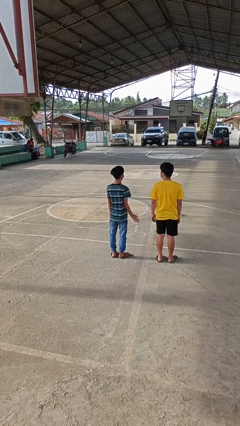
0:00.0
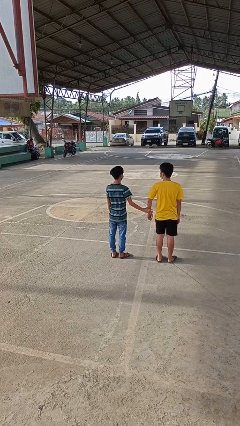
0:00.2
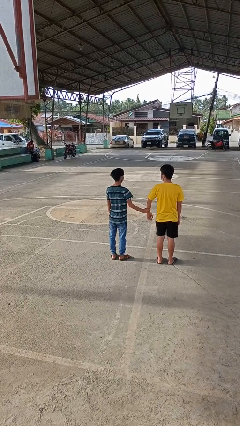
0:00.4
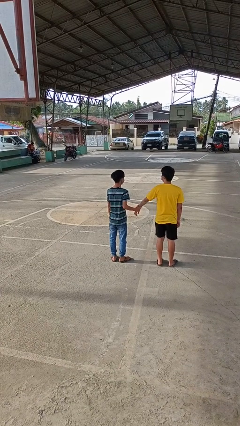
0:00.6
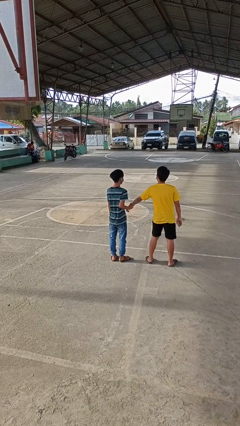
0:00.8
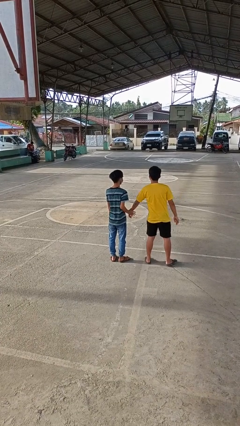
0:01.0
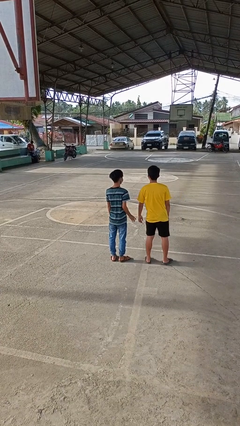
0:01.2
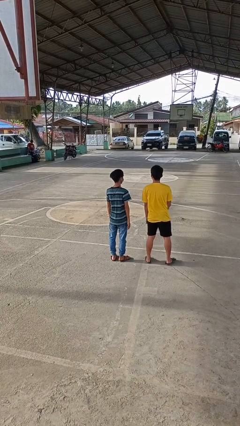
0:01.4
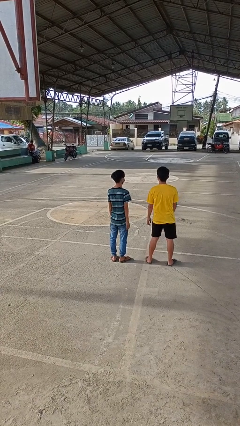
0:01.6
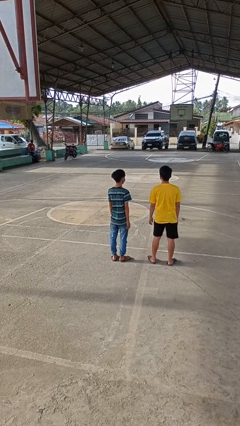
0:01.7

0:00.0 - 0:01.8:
person grabs person by forearm

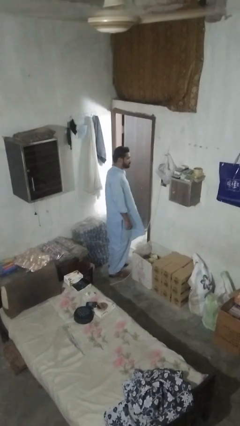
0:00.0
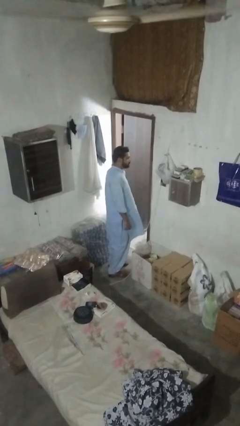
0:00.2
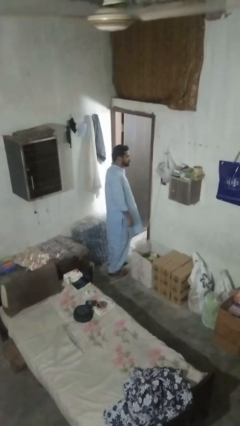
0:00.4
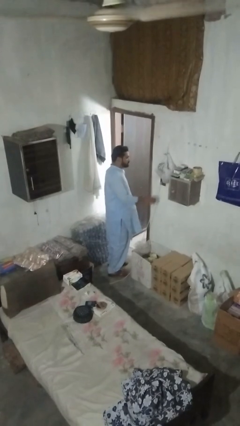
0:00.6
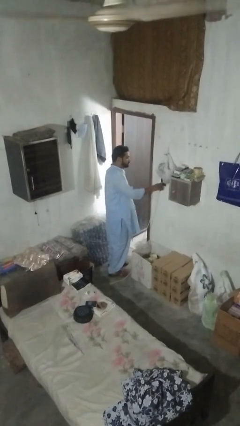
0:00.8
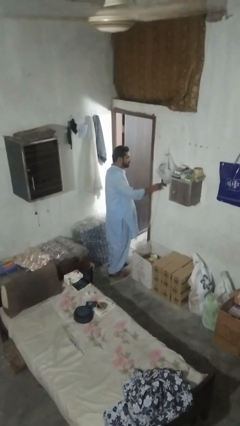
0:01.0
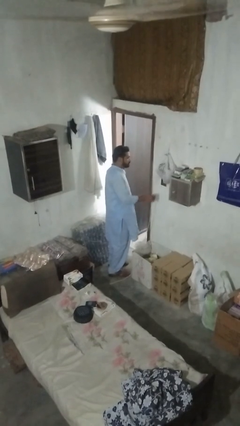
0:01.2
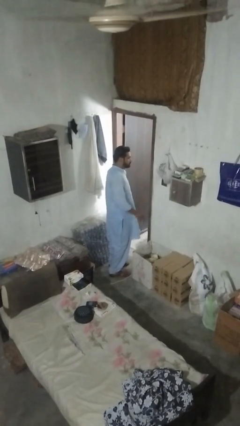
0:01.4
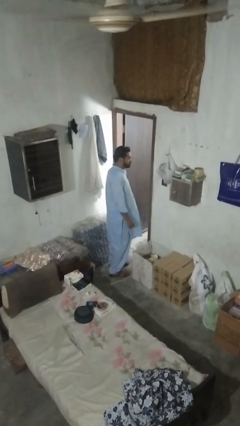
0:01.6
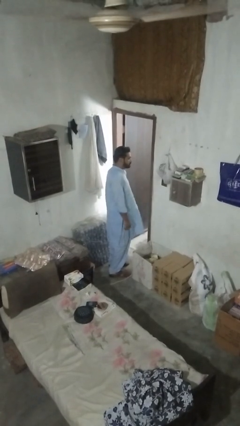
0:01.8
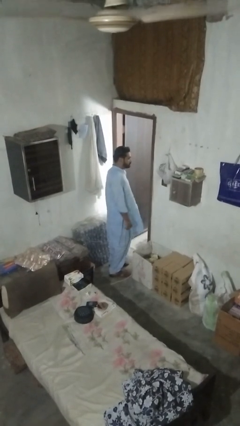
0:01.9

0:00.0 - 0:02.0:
person unplugs from electrical socket

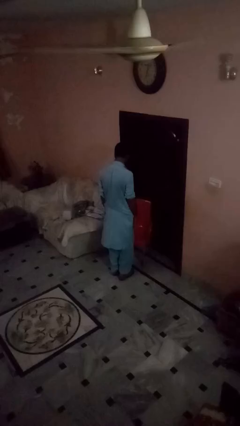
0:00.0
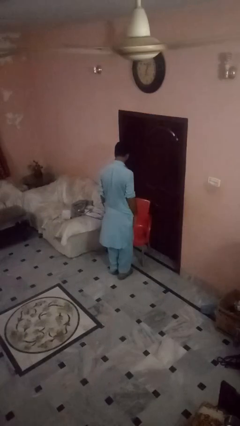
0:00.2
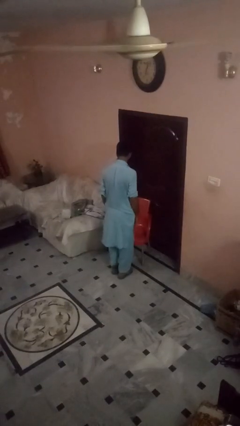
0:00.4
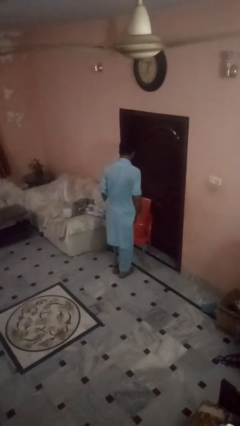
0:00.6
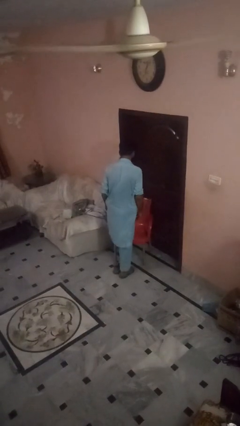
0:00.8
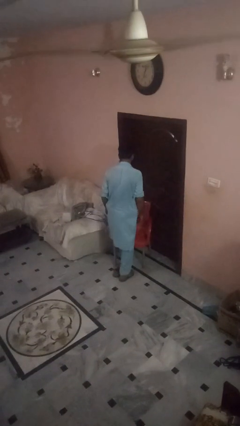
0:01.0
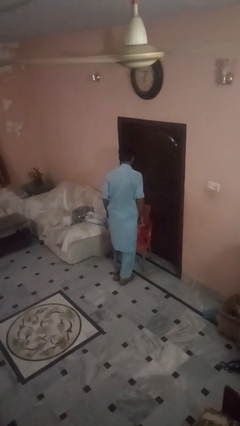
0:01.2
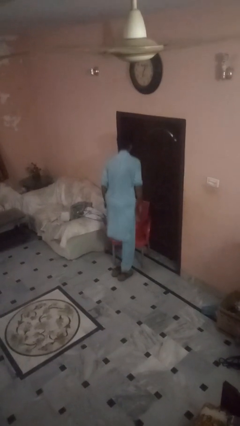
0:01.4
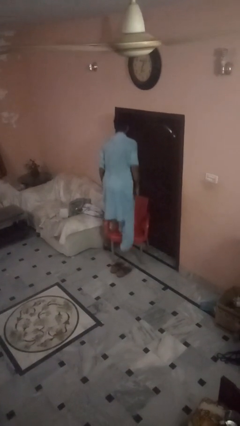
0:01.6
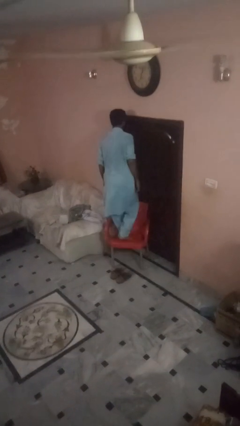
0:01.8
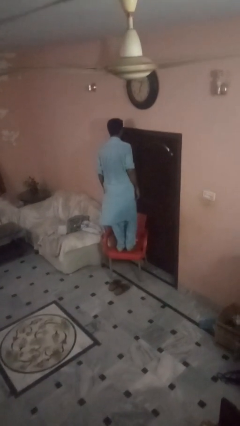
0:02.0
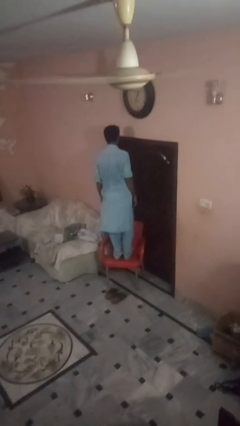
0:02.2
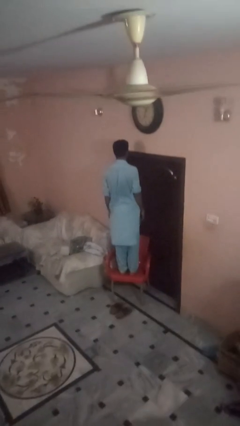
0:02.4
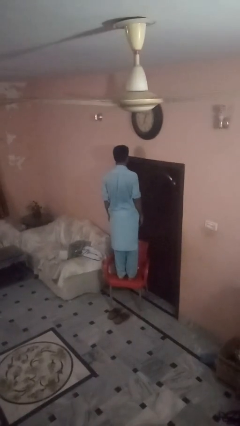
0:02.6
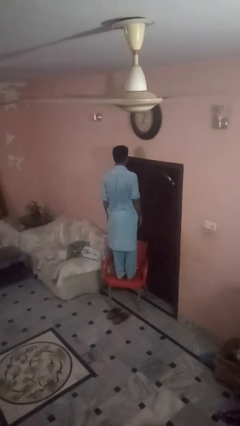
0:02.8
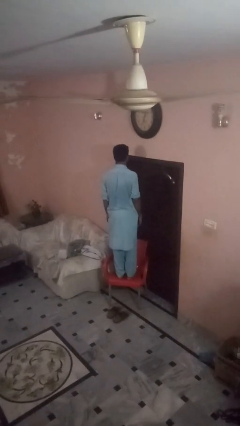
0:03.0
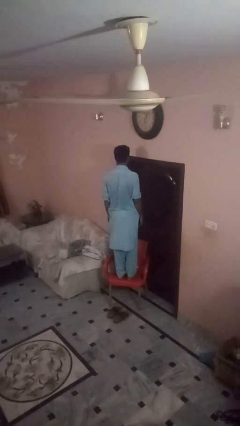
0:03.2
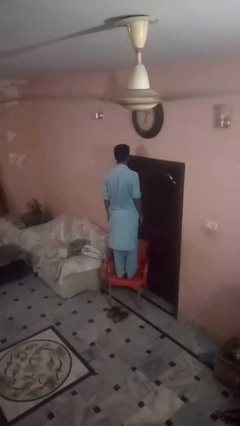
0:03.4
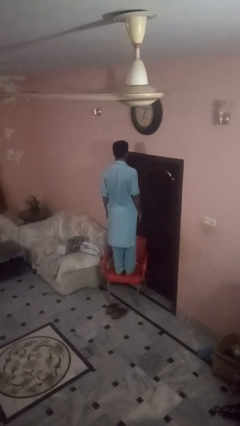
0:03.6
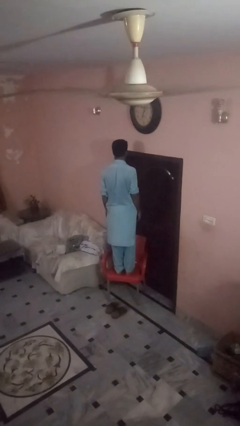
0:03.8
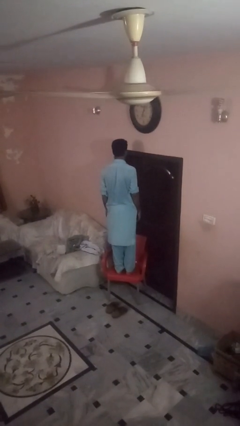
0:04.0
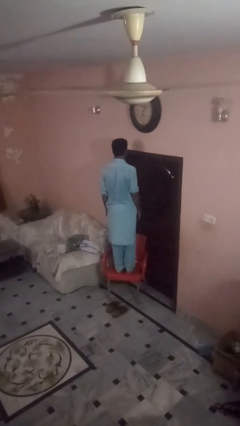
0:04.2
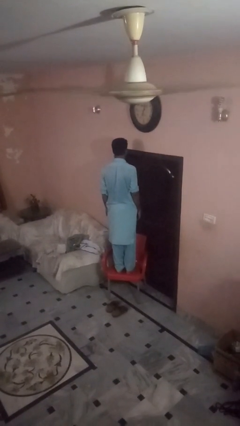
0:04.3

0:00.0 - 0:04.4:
person climbs on chair

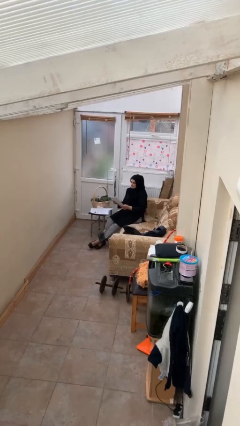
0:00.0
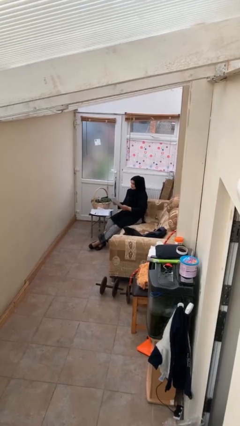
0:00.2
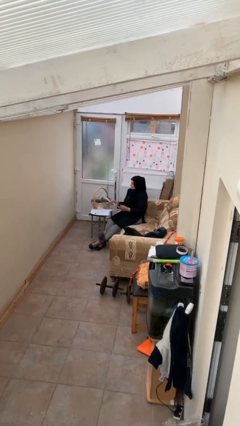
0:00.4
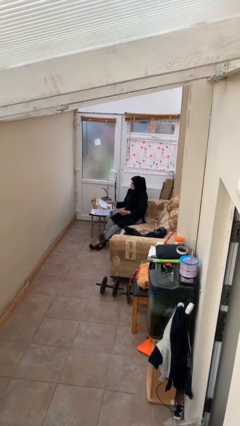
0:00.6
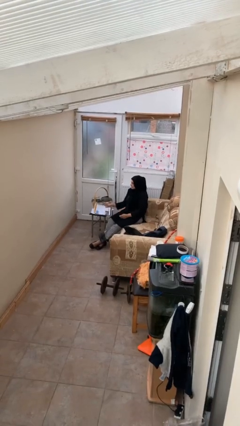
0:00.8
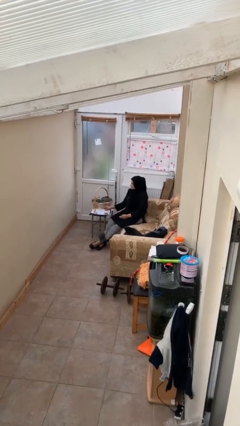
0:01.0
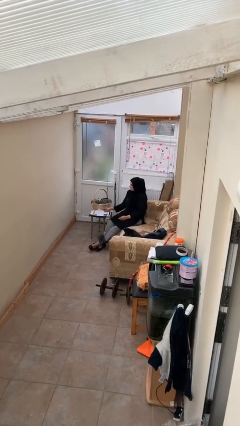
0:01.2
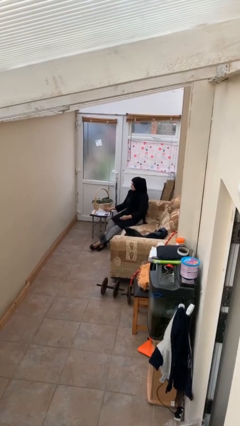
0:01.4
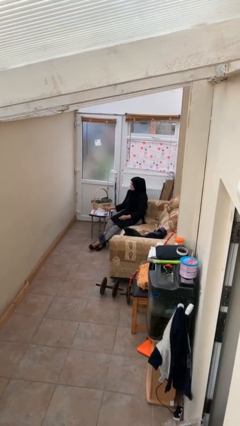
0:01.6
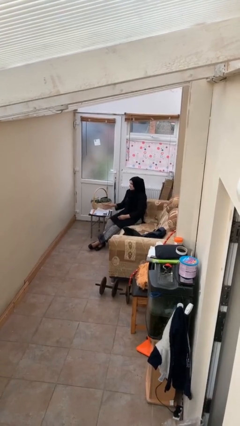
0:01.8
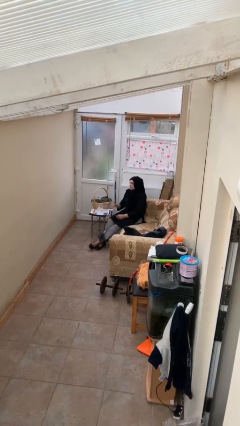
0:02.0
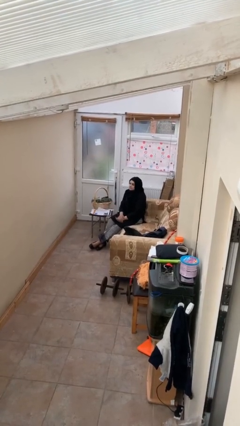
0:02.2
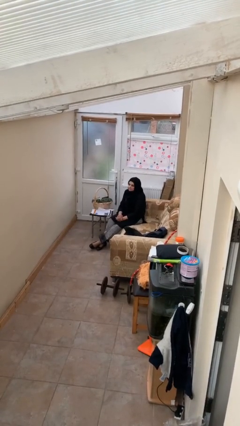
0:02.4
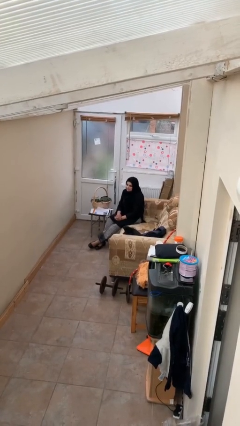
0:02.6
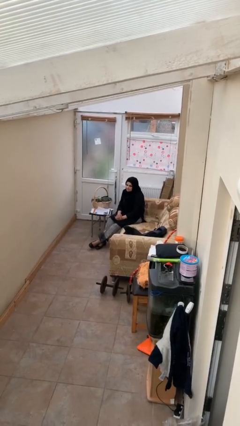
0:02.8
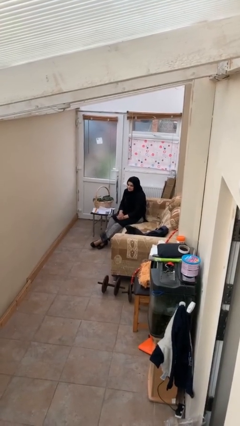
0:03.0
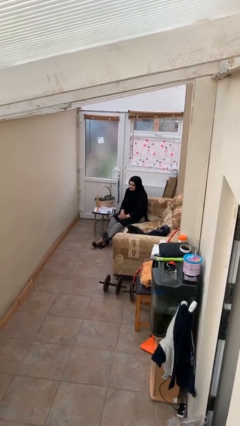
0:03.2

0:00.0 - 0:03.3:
person puts down object on table

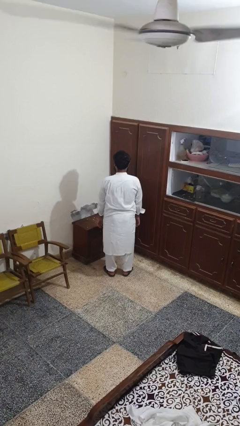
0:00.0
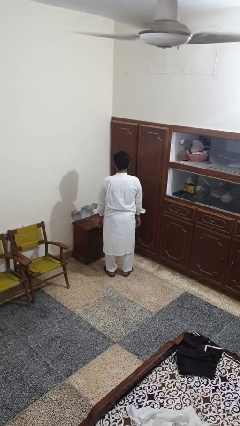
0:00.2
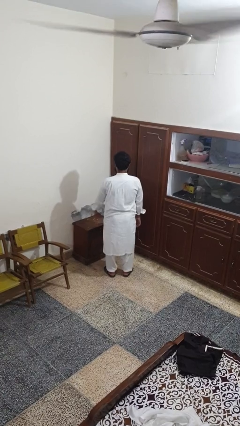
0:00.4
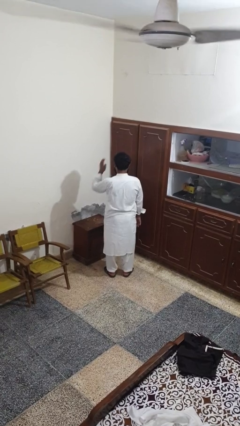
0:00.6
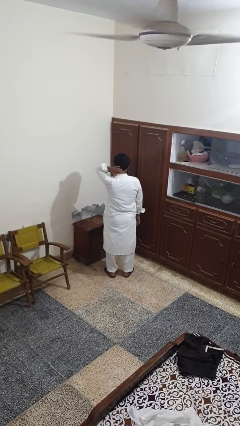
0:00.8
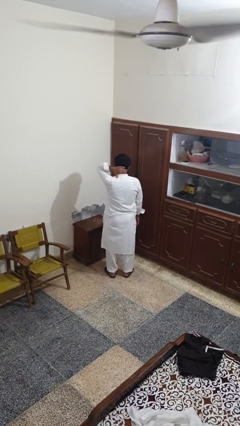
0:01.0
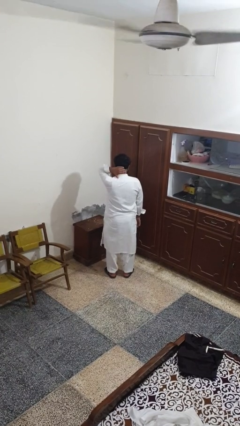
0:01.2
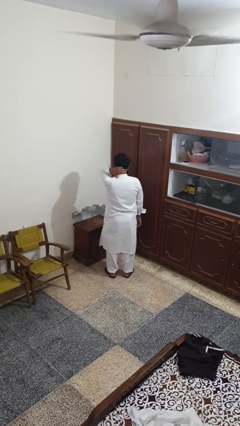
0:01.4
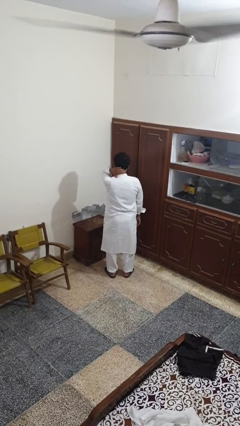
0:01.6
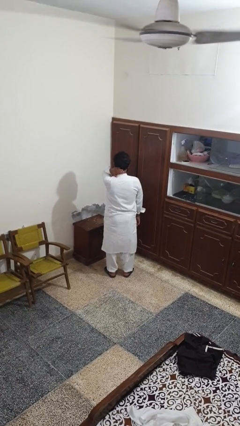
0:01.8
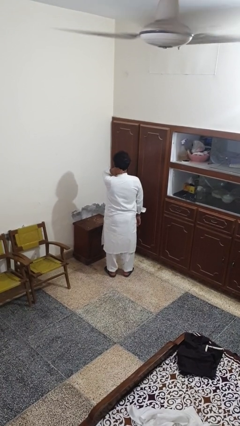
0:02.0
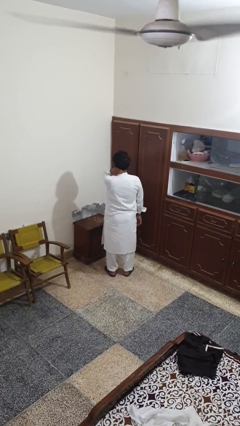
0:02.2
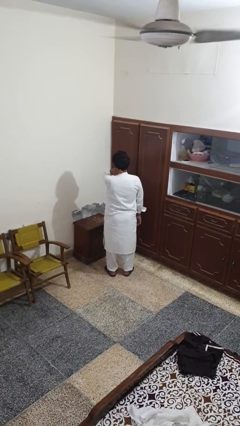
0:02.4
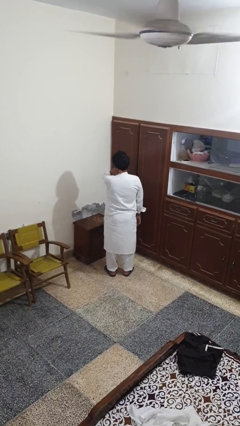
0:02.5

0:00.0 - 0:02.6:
person rubs neck

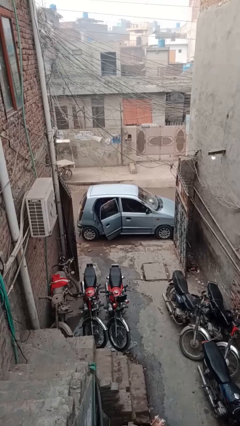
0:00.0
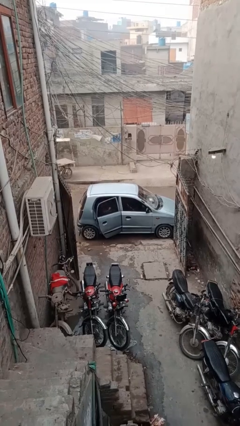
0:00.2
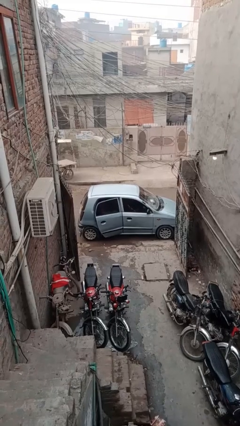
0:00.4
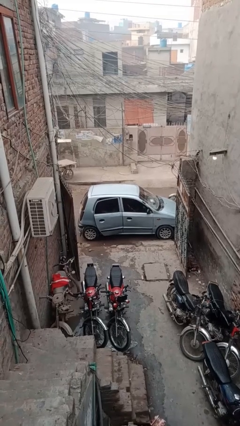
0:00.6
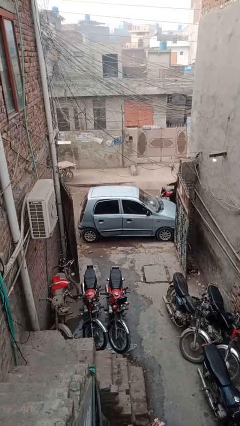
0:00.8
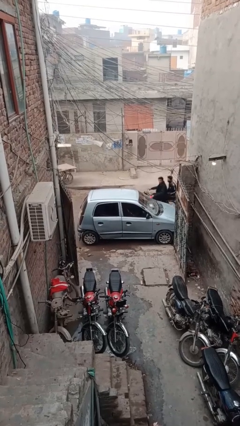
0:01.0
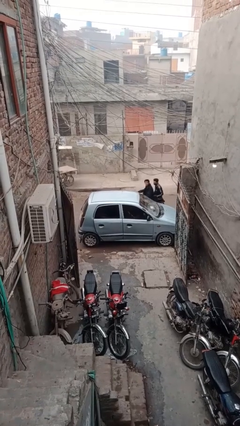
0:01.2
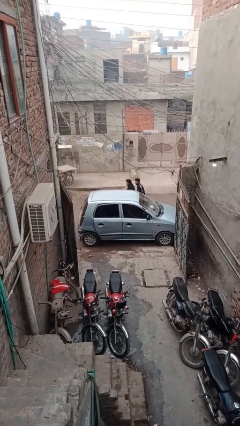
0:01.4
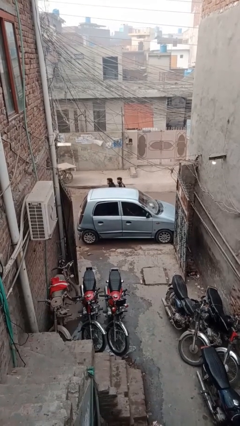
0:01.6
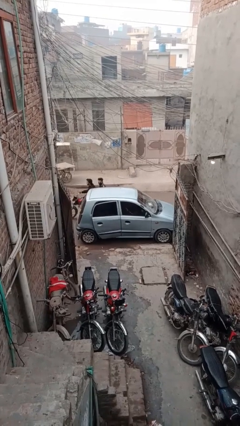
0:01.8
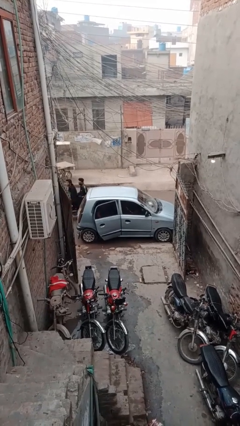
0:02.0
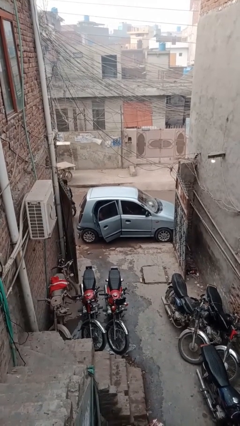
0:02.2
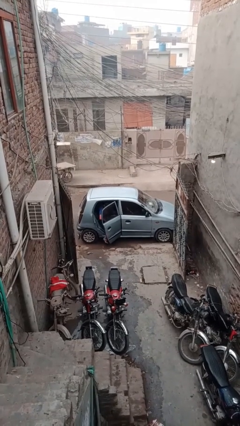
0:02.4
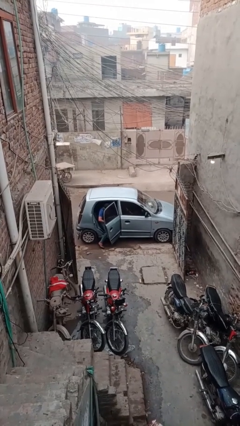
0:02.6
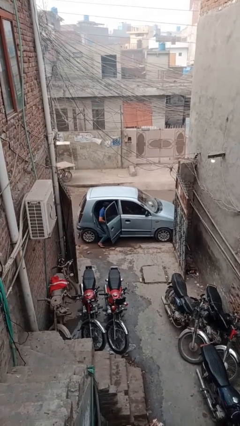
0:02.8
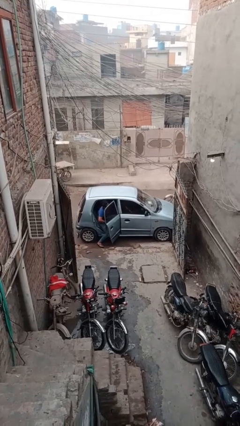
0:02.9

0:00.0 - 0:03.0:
car drops off person

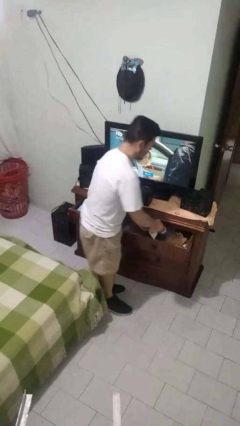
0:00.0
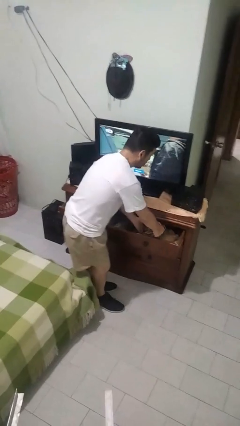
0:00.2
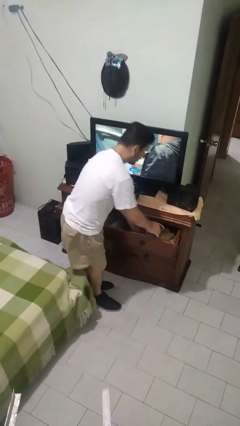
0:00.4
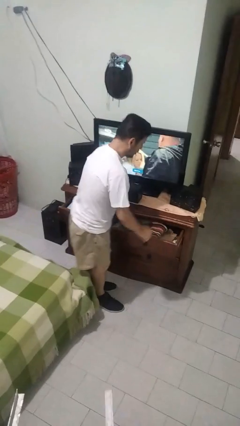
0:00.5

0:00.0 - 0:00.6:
person puts clothes into dresser
